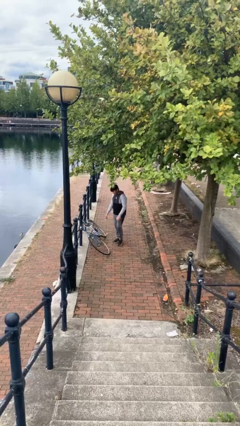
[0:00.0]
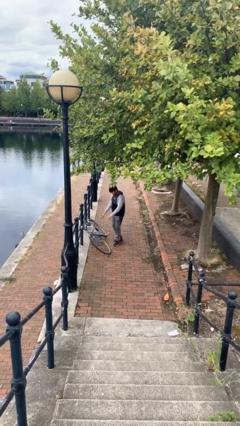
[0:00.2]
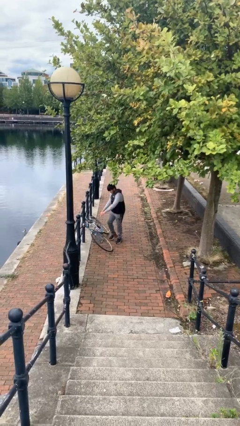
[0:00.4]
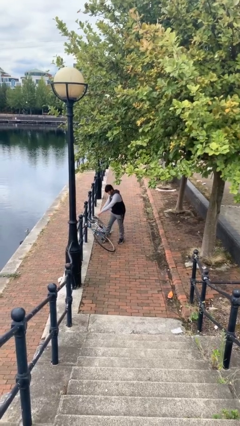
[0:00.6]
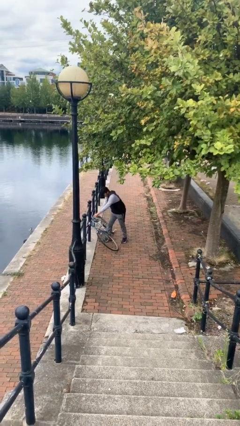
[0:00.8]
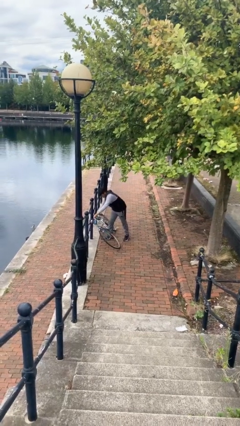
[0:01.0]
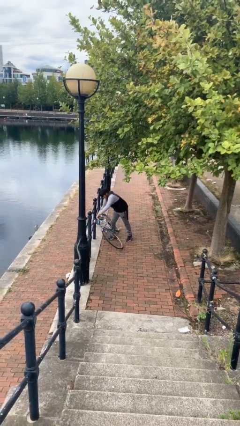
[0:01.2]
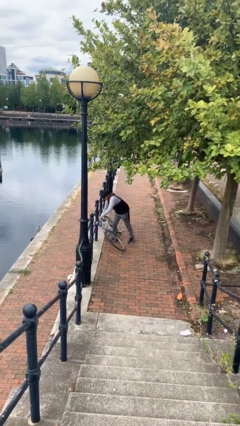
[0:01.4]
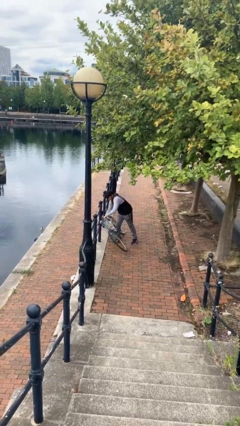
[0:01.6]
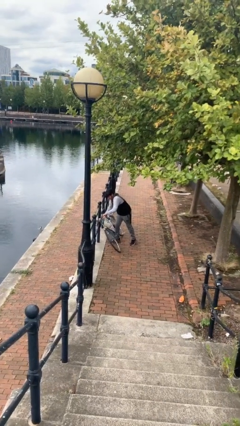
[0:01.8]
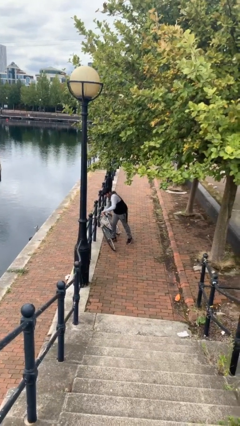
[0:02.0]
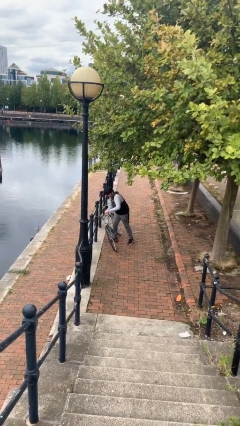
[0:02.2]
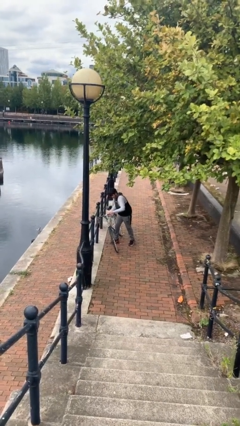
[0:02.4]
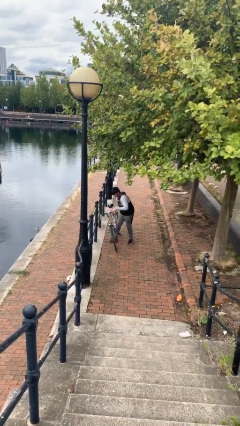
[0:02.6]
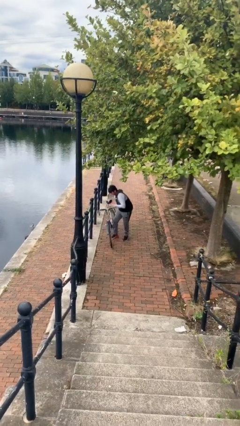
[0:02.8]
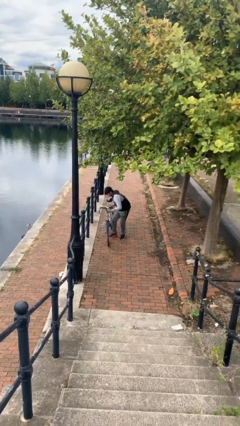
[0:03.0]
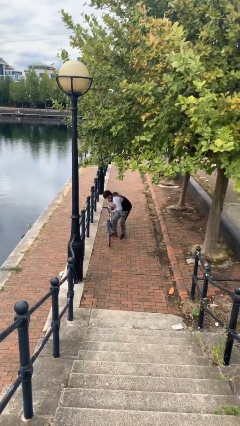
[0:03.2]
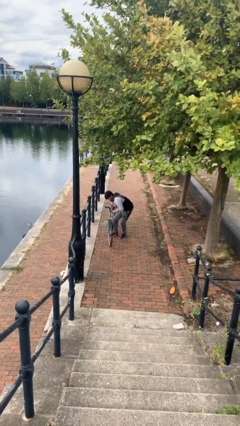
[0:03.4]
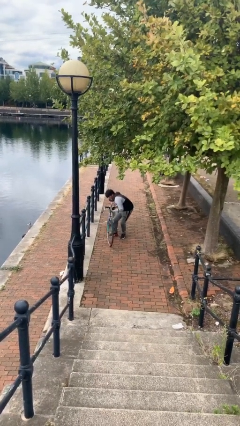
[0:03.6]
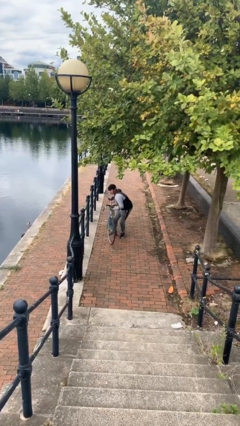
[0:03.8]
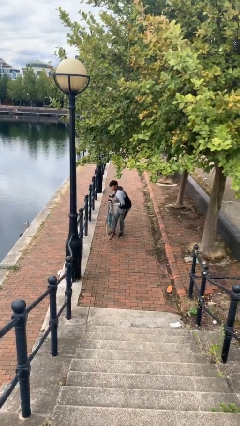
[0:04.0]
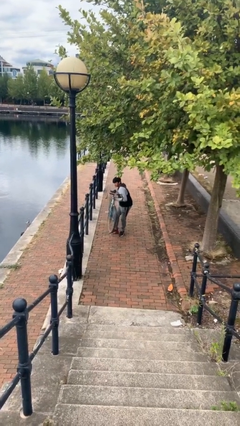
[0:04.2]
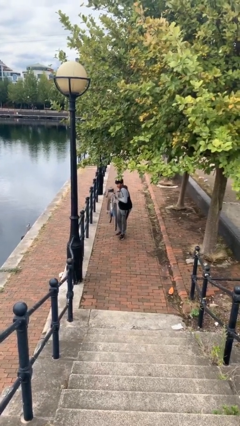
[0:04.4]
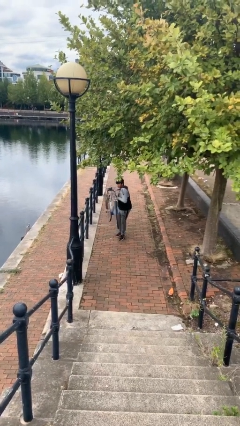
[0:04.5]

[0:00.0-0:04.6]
person picks up object from floor

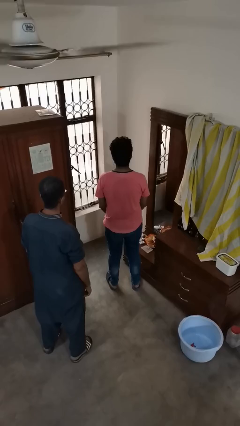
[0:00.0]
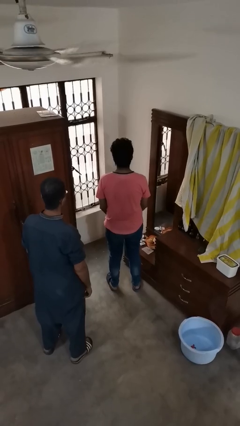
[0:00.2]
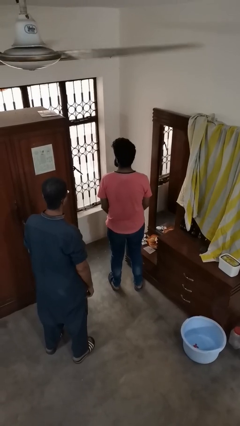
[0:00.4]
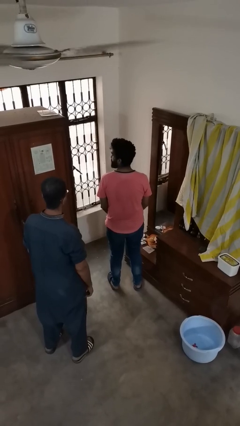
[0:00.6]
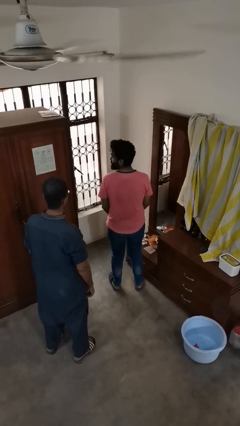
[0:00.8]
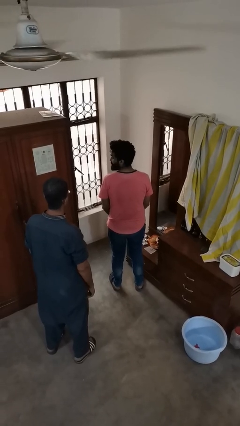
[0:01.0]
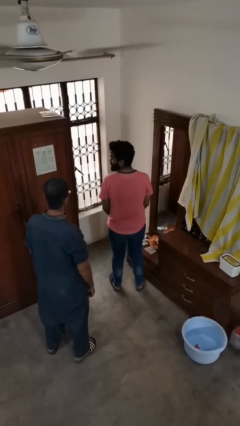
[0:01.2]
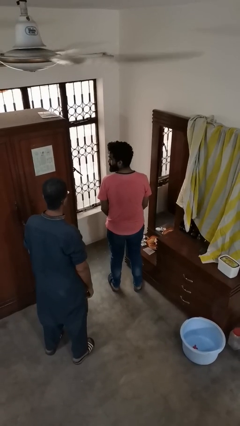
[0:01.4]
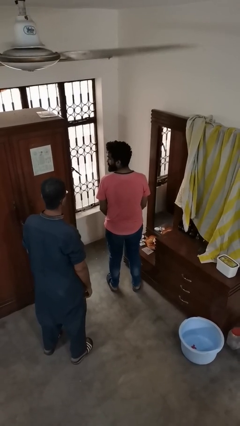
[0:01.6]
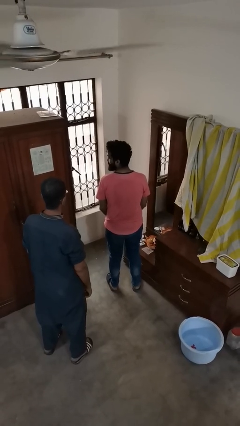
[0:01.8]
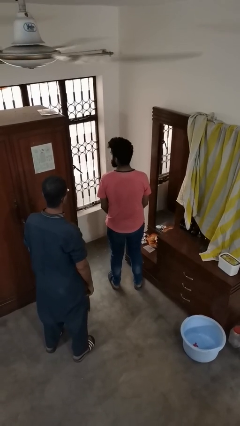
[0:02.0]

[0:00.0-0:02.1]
person looks over shoulder

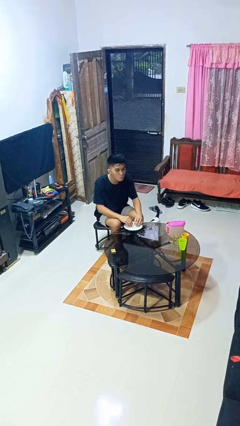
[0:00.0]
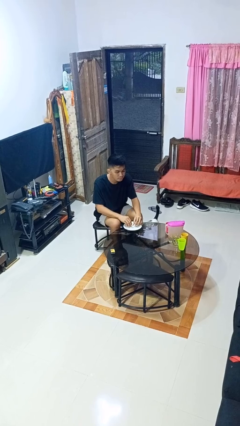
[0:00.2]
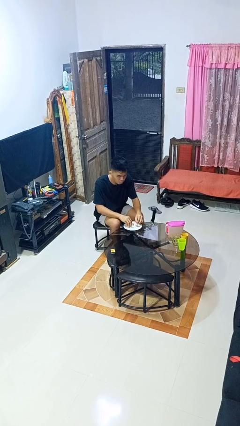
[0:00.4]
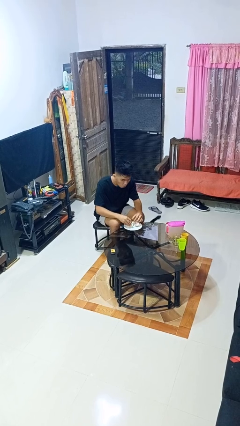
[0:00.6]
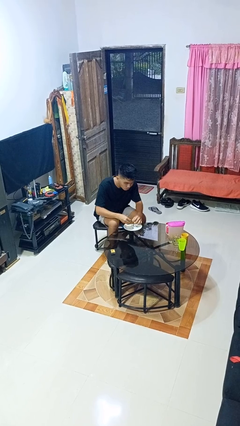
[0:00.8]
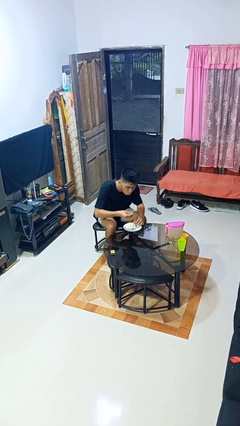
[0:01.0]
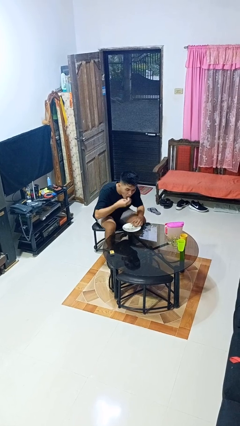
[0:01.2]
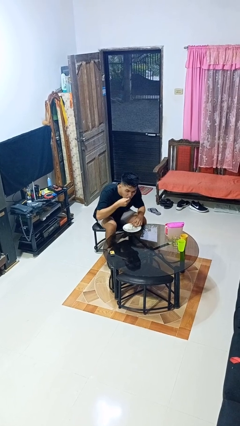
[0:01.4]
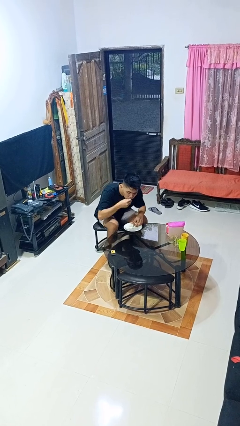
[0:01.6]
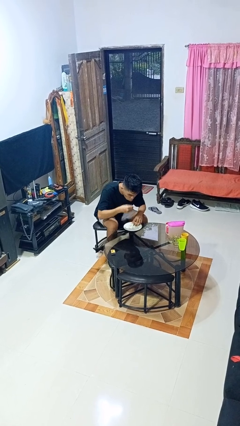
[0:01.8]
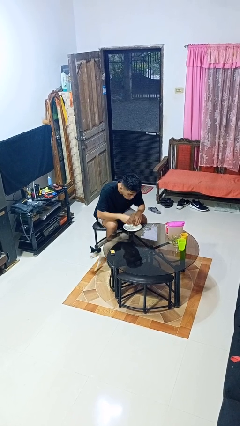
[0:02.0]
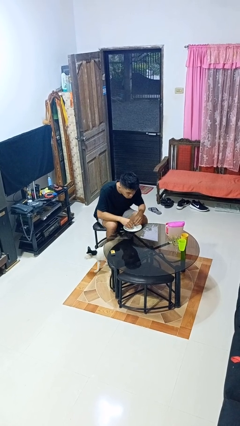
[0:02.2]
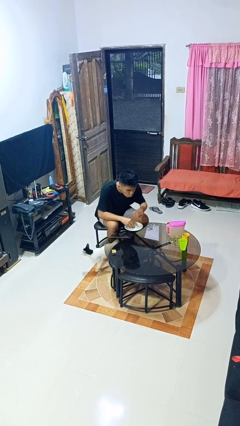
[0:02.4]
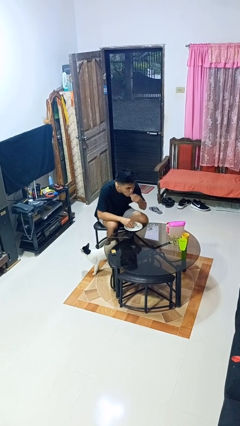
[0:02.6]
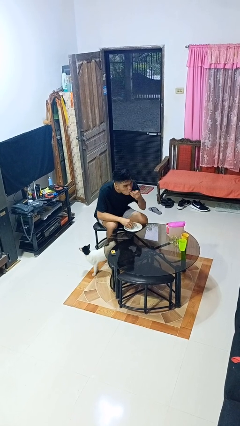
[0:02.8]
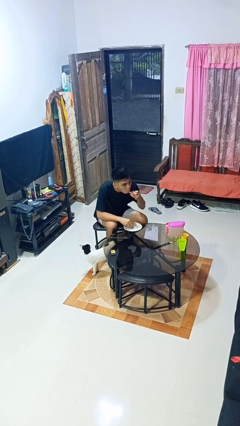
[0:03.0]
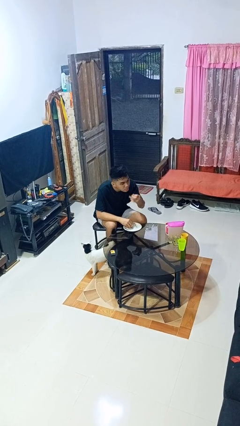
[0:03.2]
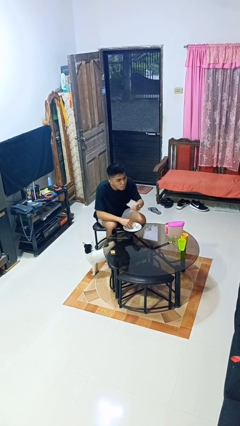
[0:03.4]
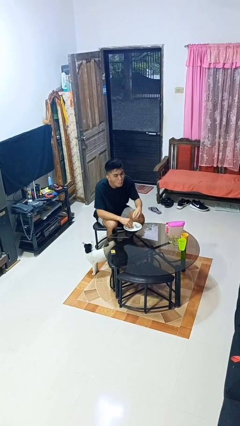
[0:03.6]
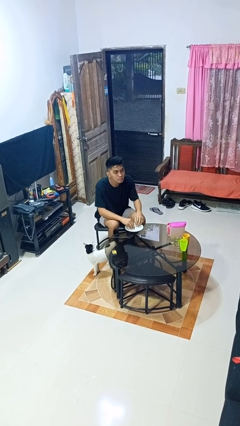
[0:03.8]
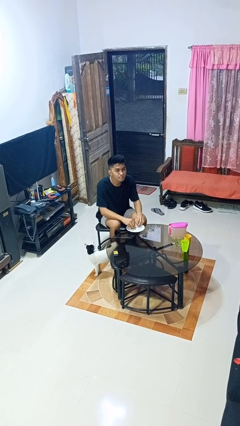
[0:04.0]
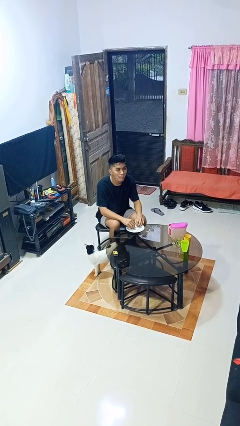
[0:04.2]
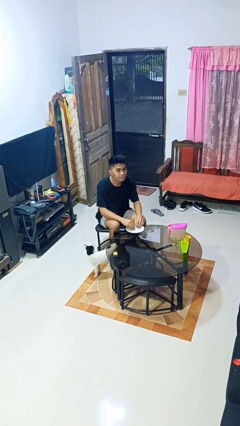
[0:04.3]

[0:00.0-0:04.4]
person eats with hands

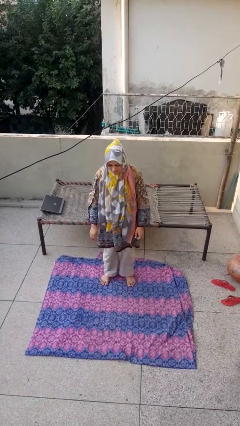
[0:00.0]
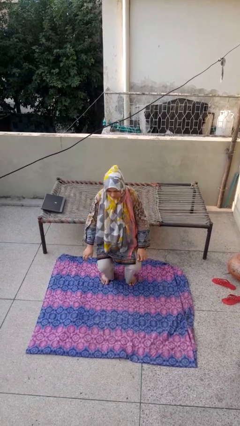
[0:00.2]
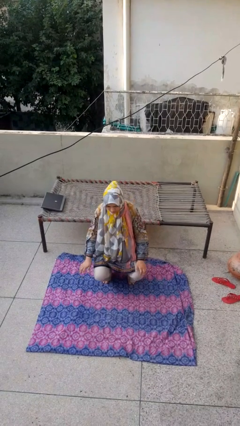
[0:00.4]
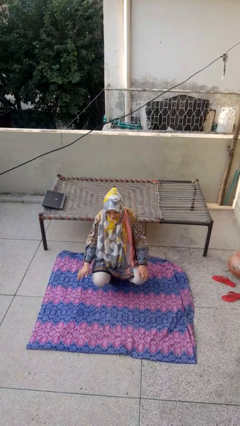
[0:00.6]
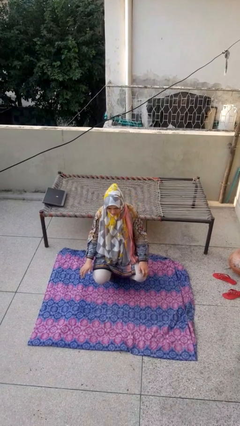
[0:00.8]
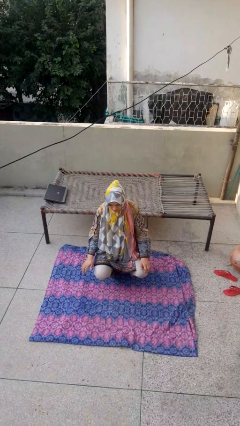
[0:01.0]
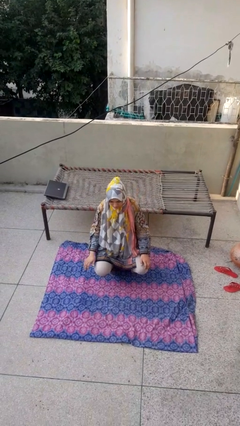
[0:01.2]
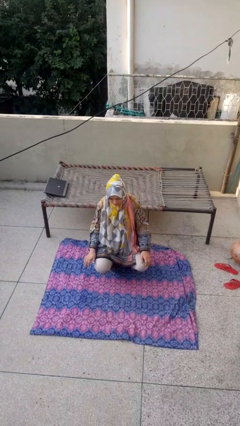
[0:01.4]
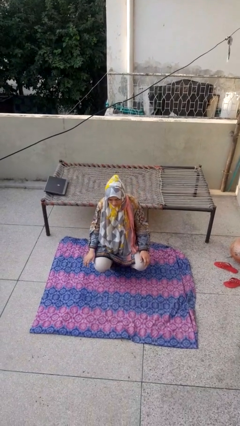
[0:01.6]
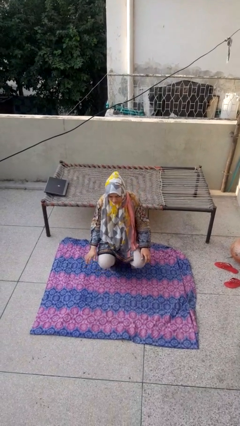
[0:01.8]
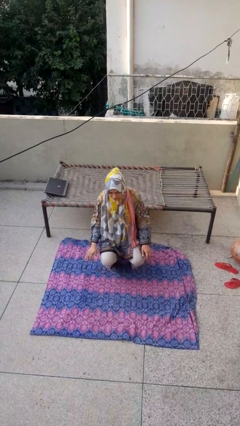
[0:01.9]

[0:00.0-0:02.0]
person squats

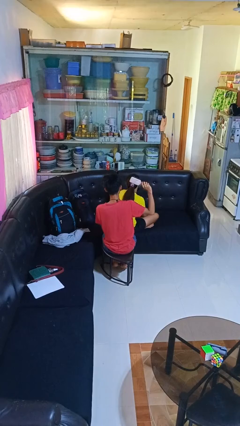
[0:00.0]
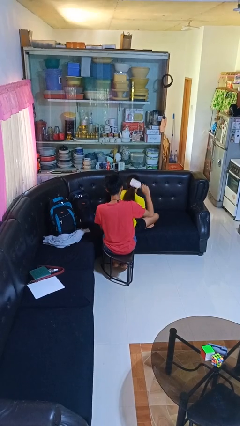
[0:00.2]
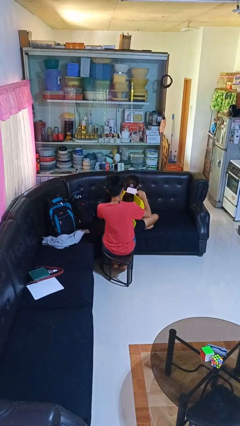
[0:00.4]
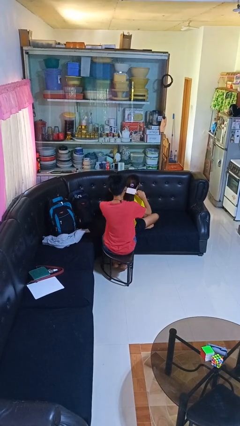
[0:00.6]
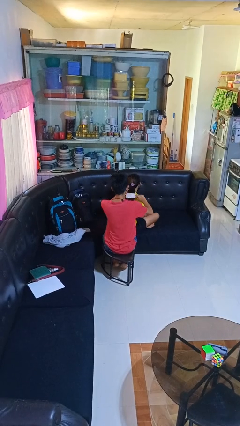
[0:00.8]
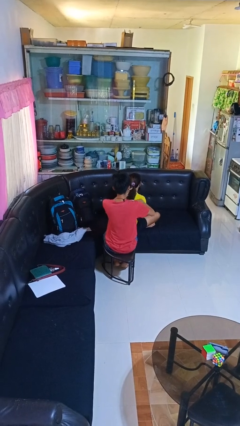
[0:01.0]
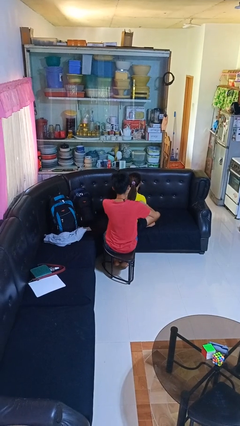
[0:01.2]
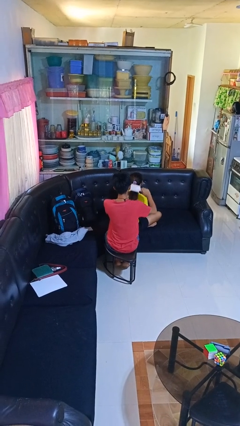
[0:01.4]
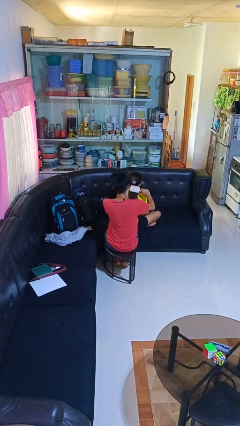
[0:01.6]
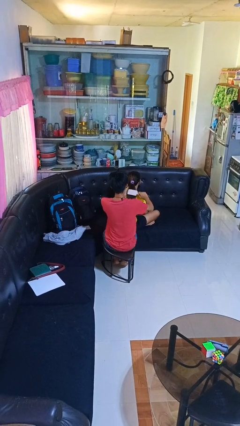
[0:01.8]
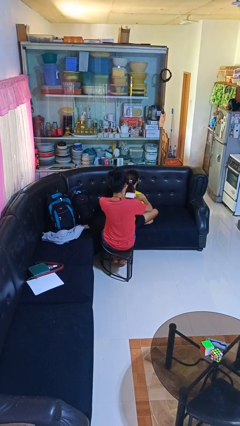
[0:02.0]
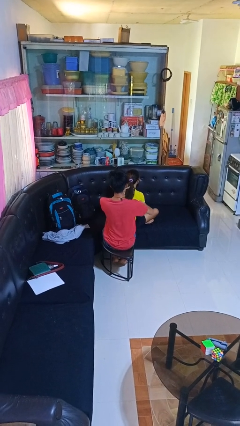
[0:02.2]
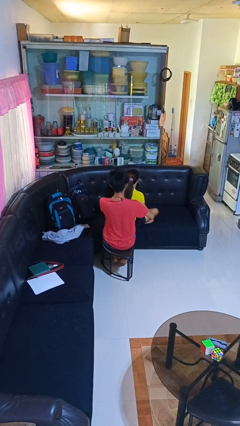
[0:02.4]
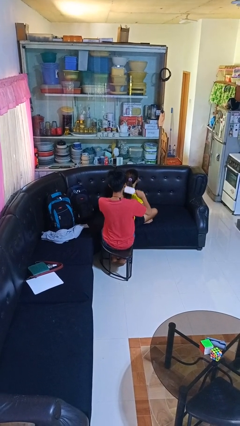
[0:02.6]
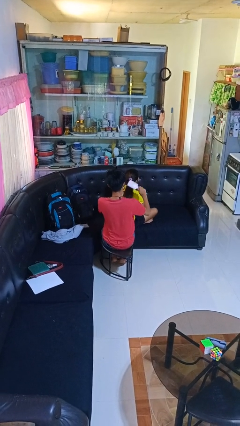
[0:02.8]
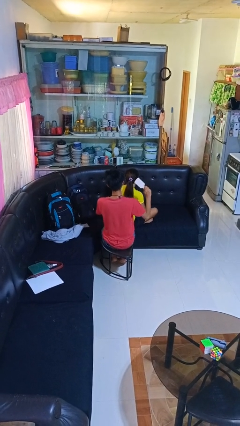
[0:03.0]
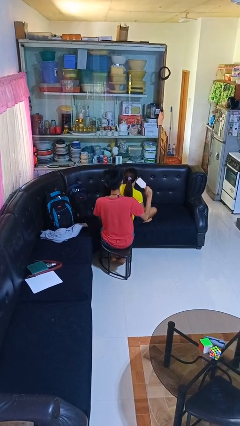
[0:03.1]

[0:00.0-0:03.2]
person brushes hair of person

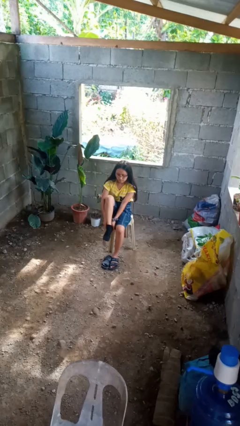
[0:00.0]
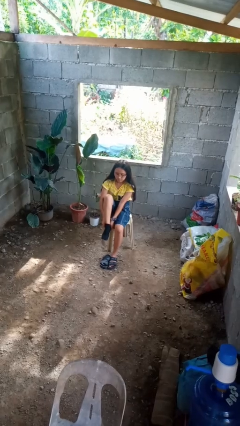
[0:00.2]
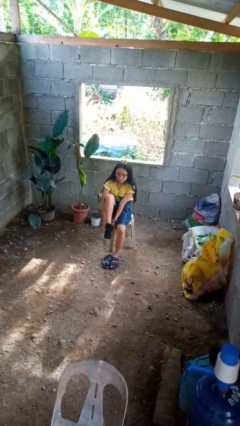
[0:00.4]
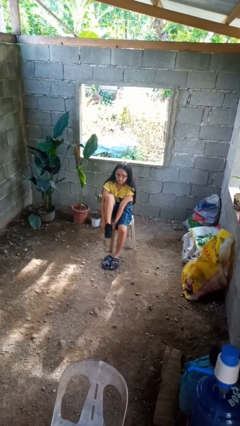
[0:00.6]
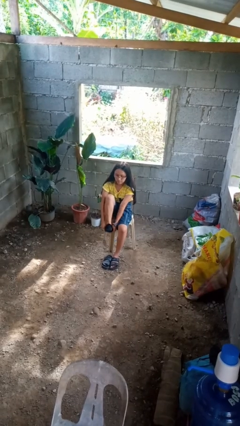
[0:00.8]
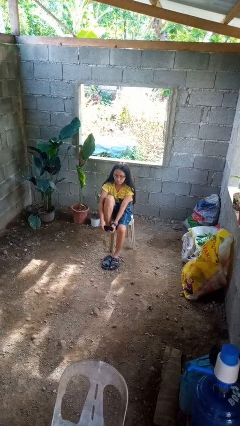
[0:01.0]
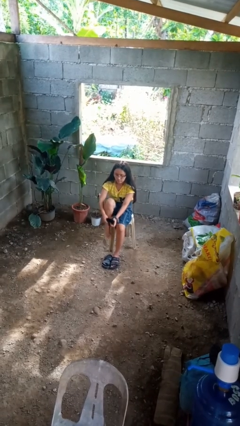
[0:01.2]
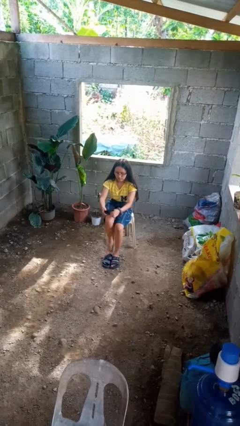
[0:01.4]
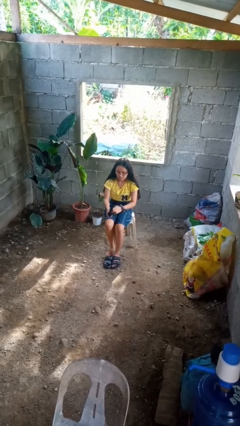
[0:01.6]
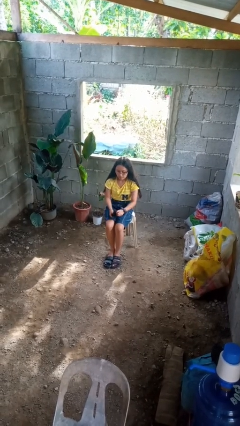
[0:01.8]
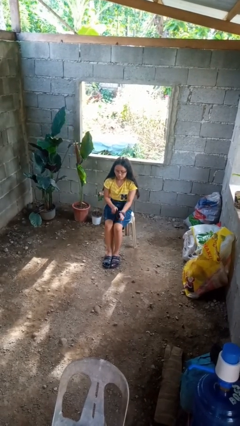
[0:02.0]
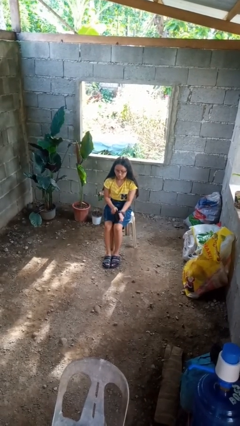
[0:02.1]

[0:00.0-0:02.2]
person takes off socks
